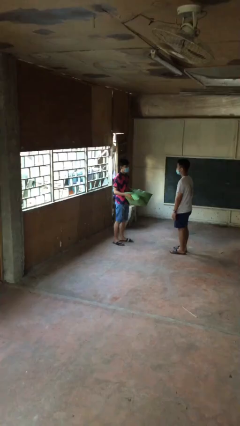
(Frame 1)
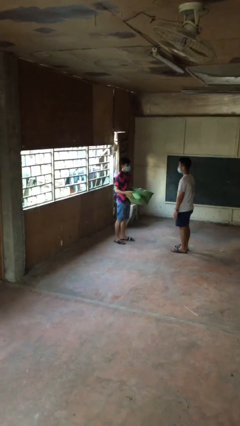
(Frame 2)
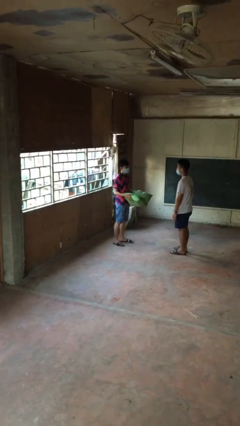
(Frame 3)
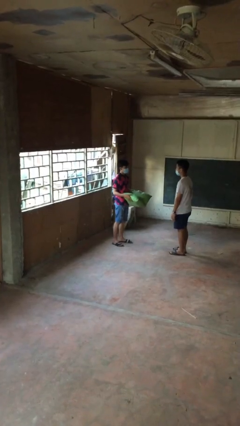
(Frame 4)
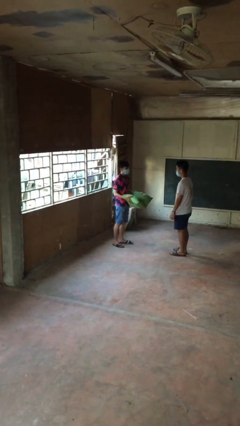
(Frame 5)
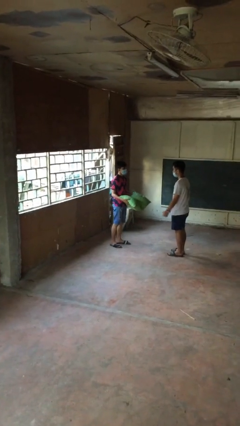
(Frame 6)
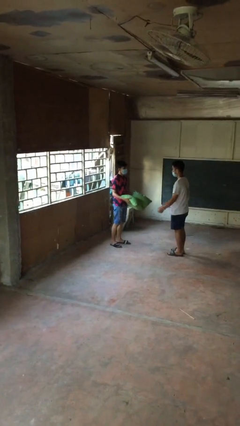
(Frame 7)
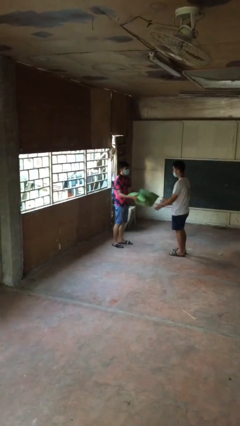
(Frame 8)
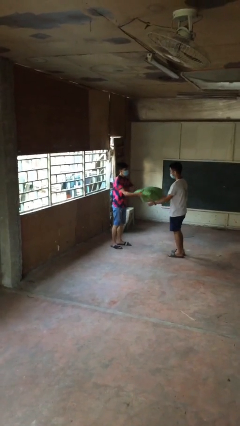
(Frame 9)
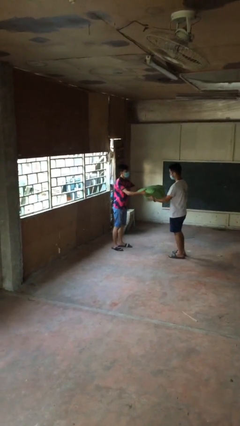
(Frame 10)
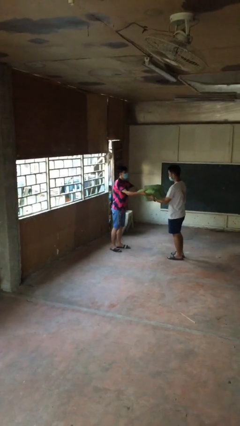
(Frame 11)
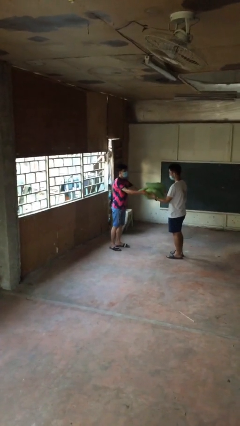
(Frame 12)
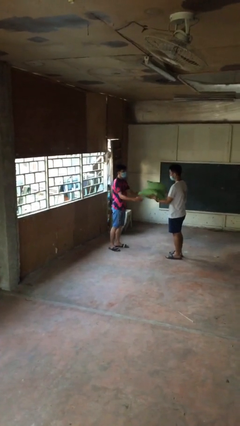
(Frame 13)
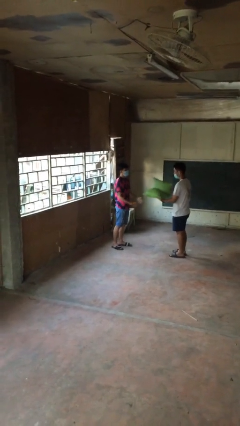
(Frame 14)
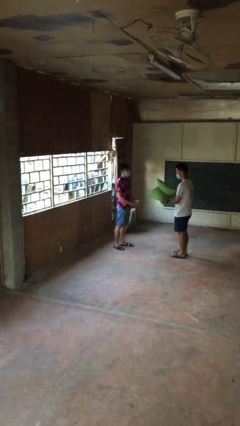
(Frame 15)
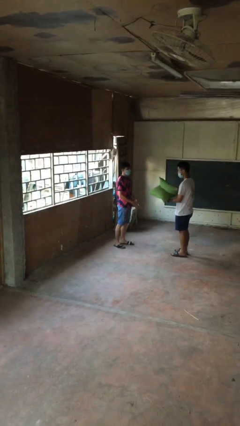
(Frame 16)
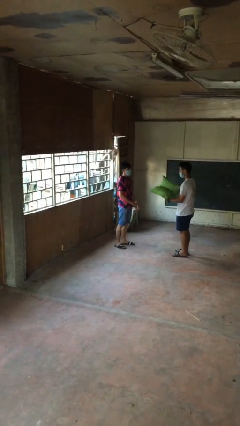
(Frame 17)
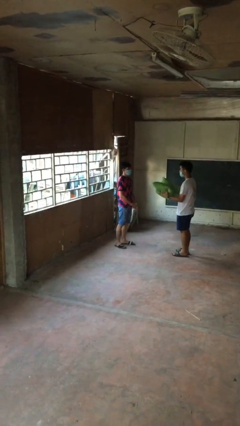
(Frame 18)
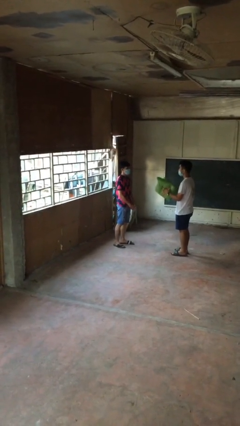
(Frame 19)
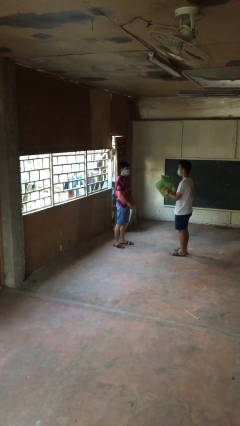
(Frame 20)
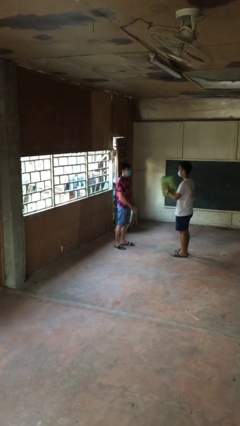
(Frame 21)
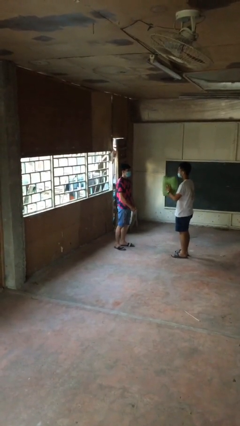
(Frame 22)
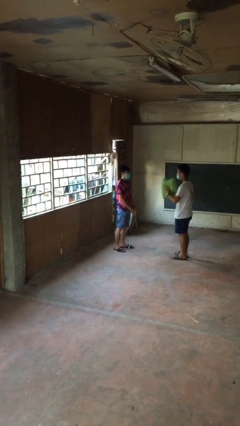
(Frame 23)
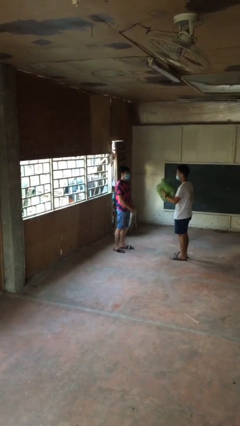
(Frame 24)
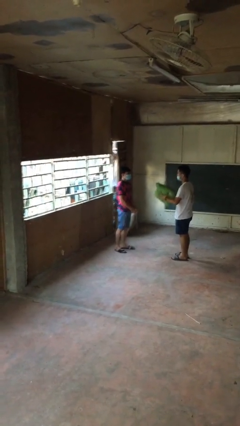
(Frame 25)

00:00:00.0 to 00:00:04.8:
person transfers object to person

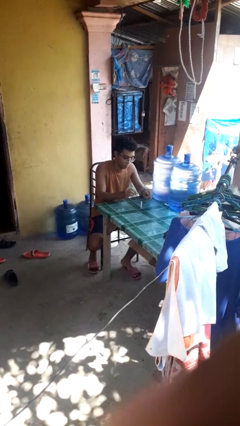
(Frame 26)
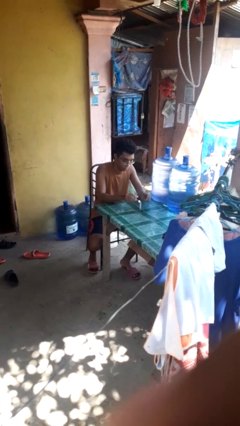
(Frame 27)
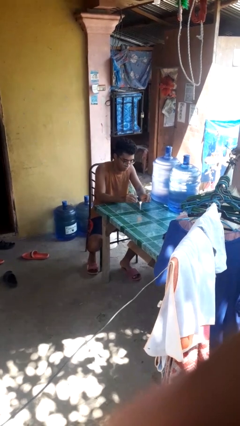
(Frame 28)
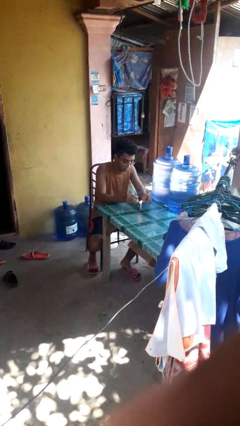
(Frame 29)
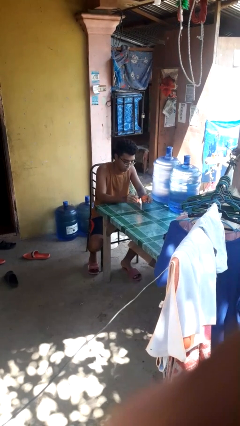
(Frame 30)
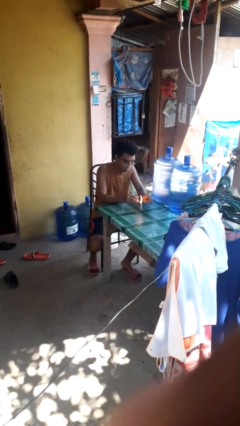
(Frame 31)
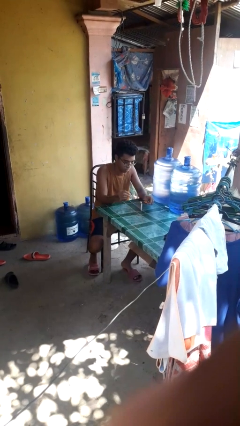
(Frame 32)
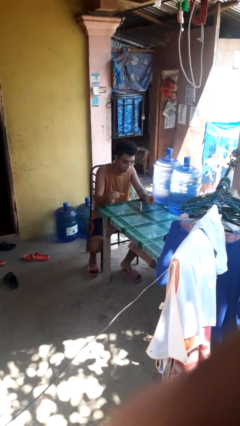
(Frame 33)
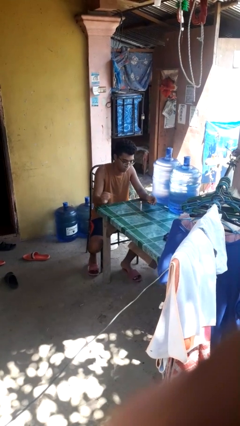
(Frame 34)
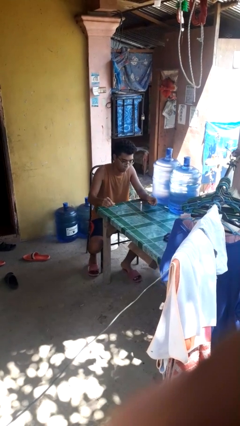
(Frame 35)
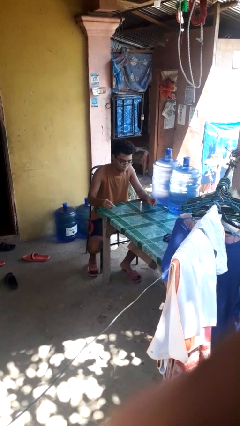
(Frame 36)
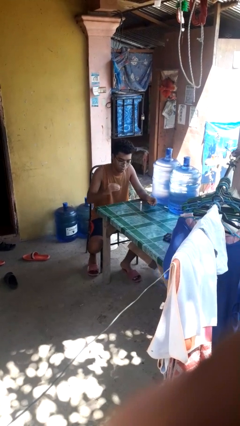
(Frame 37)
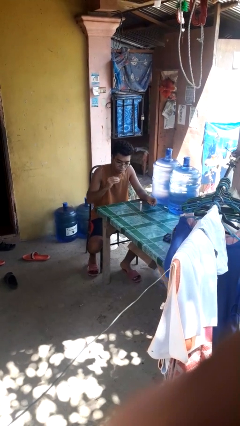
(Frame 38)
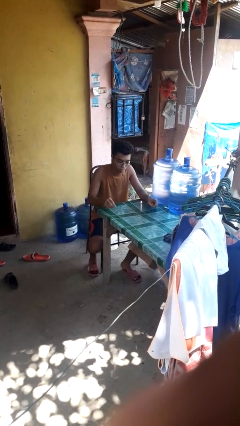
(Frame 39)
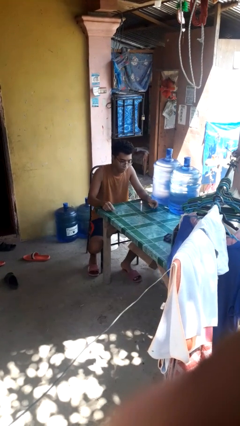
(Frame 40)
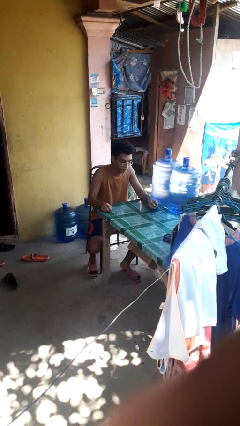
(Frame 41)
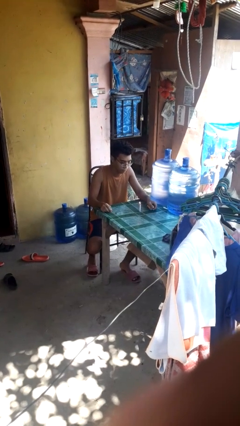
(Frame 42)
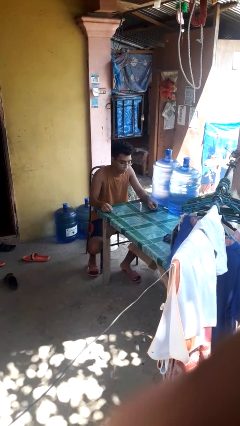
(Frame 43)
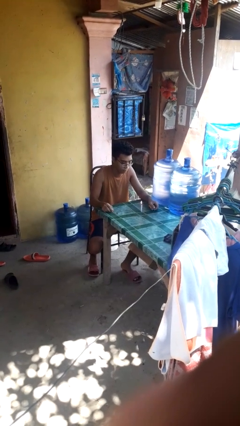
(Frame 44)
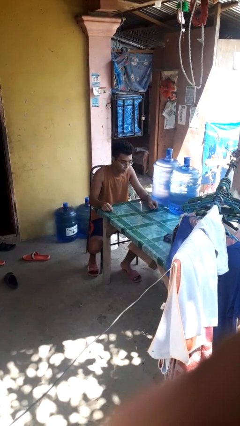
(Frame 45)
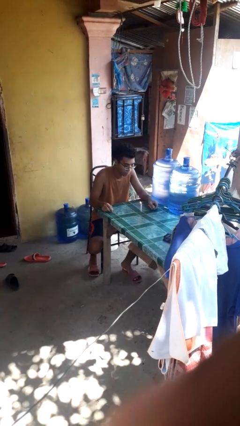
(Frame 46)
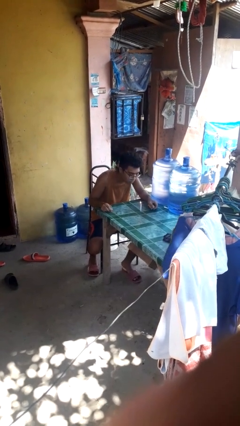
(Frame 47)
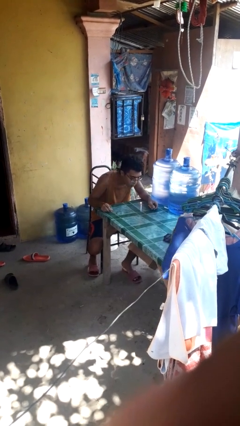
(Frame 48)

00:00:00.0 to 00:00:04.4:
person lights candle

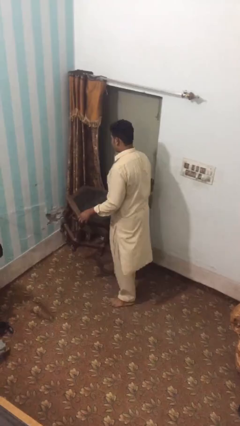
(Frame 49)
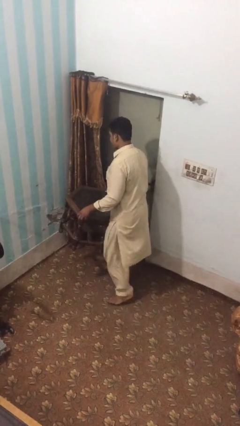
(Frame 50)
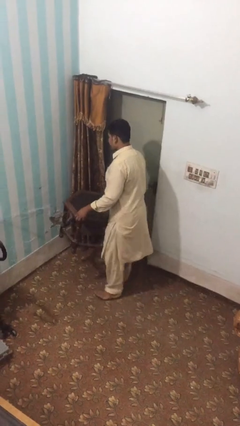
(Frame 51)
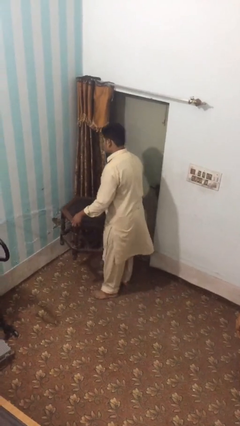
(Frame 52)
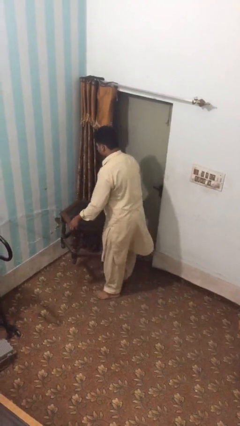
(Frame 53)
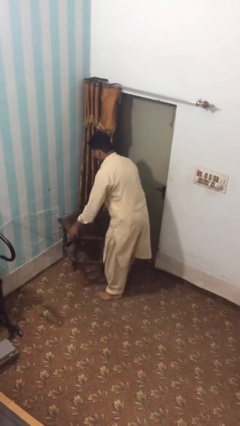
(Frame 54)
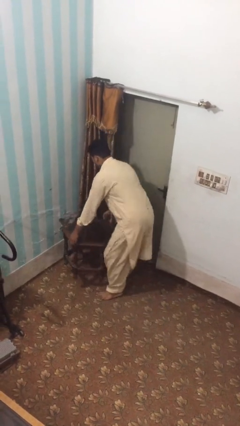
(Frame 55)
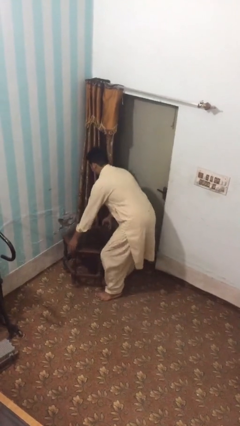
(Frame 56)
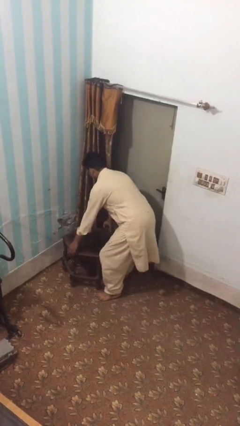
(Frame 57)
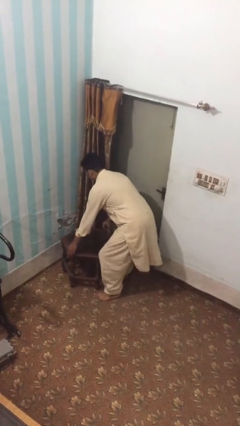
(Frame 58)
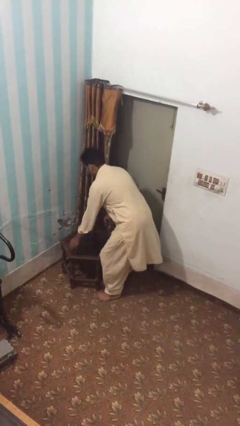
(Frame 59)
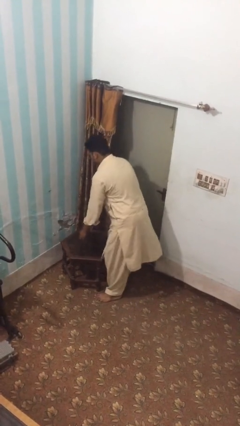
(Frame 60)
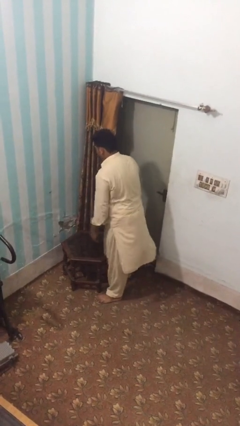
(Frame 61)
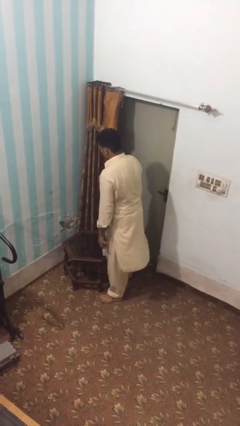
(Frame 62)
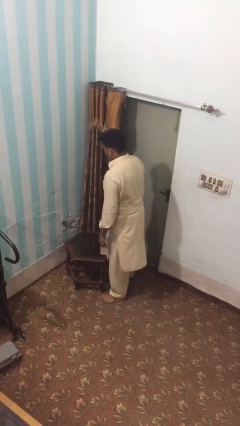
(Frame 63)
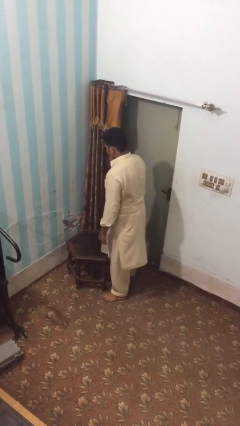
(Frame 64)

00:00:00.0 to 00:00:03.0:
person puts down object on floor

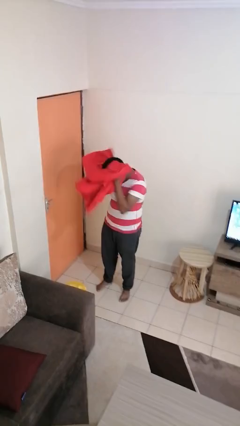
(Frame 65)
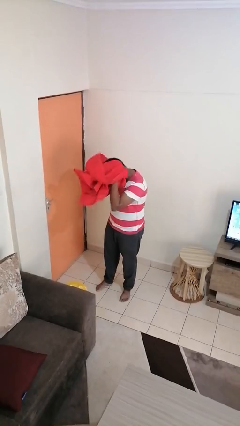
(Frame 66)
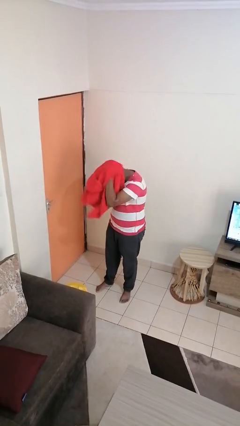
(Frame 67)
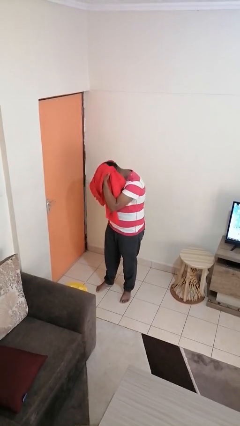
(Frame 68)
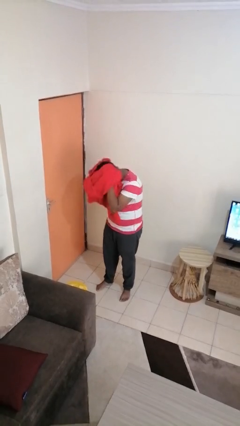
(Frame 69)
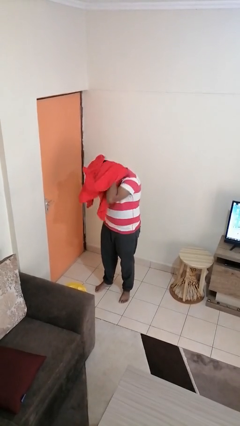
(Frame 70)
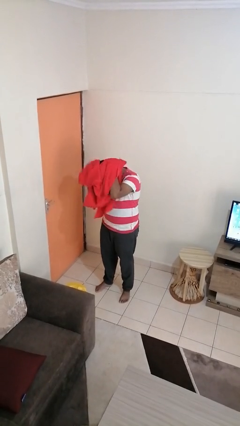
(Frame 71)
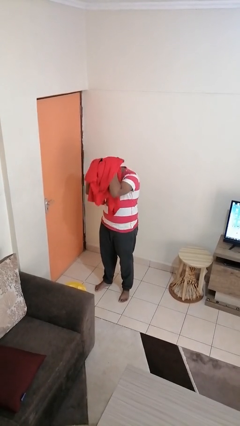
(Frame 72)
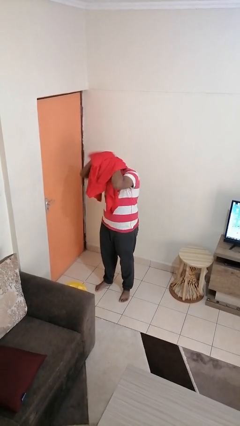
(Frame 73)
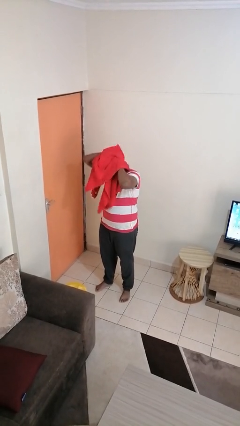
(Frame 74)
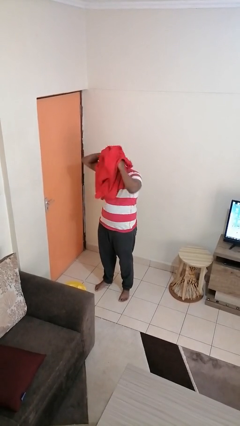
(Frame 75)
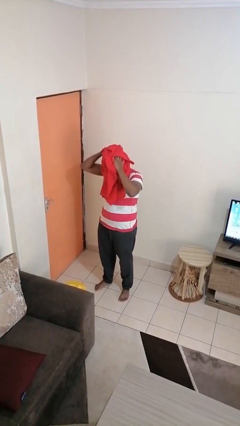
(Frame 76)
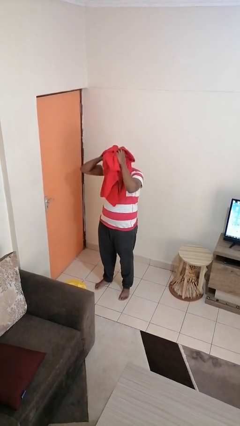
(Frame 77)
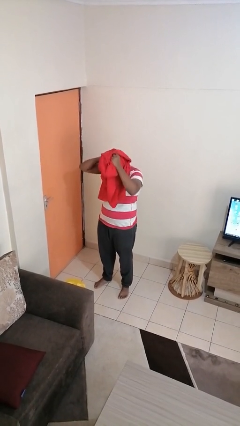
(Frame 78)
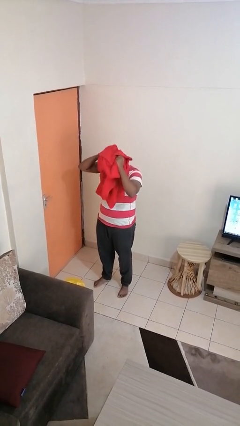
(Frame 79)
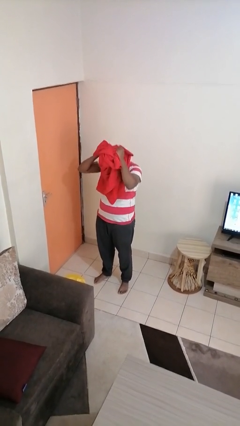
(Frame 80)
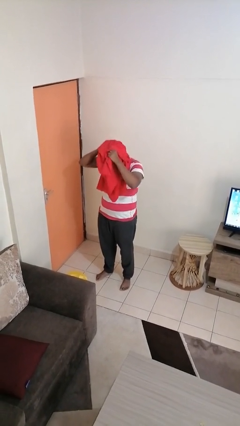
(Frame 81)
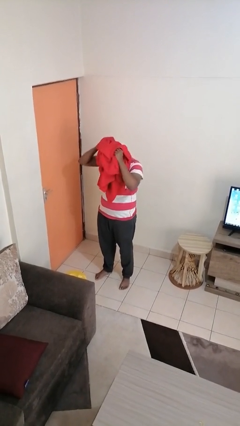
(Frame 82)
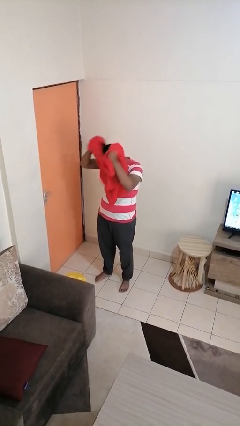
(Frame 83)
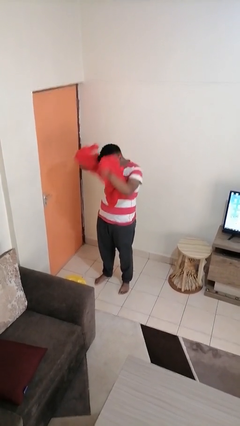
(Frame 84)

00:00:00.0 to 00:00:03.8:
person dries hair with towel

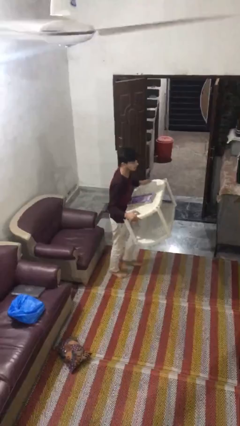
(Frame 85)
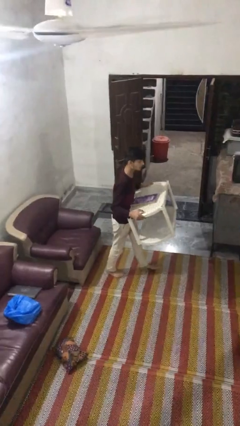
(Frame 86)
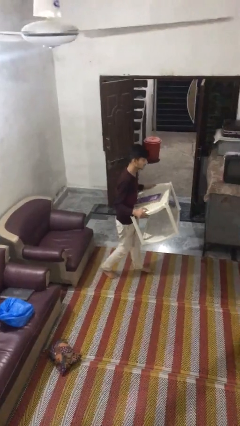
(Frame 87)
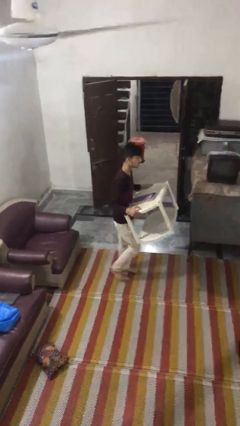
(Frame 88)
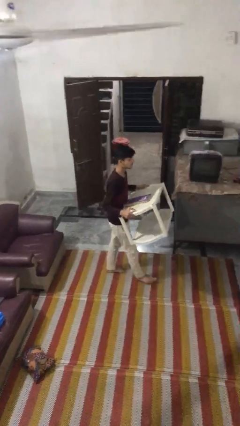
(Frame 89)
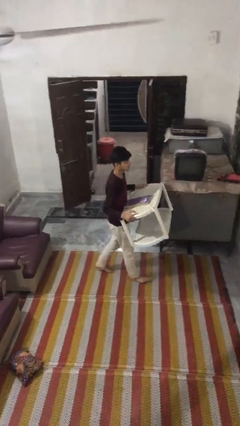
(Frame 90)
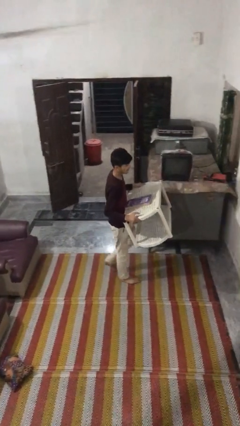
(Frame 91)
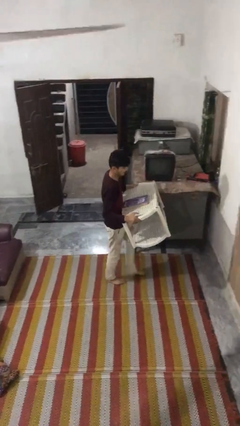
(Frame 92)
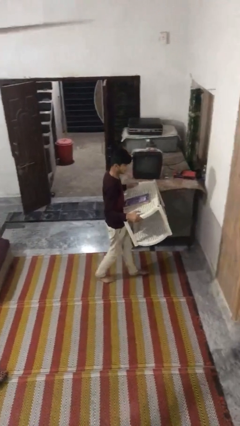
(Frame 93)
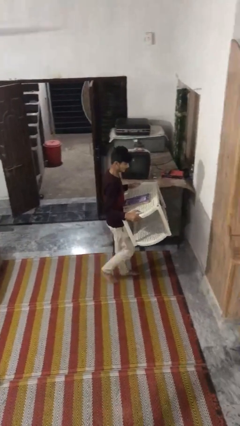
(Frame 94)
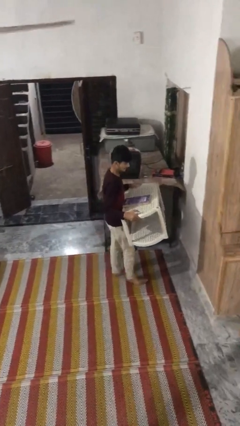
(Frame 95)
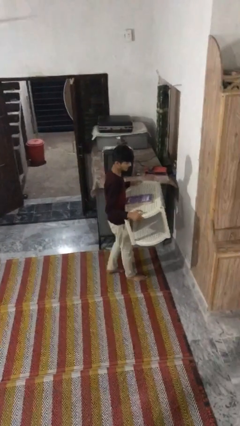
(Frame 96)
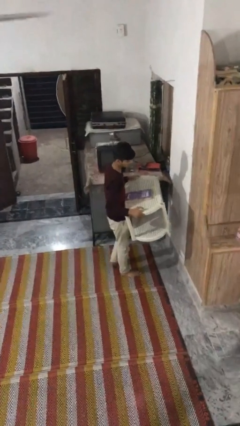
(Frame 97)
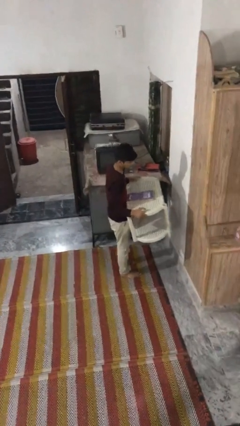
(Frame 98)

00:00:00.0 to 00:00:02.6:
person carries heavy object
